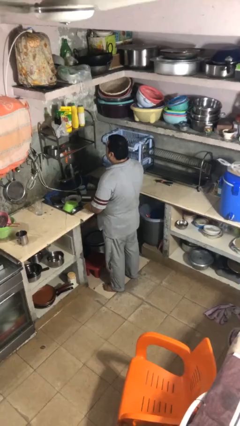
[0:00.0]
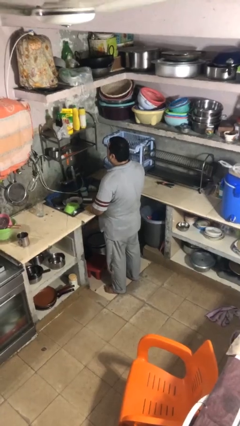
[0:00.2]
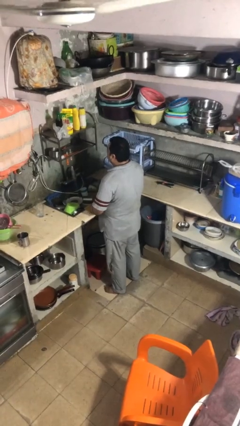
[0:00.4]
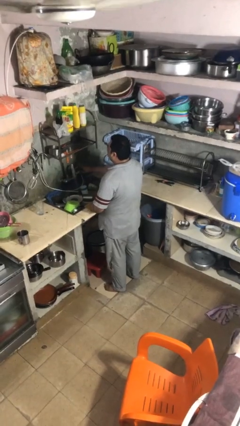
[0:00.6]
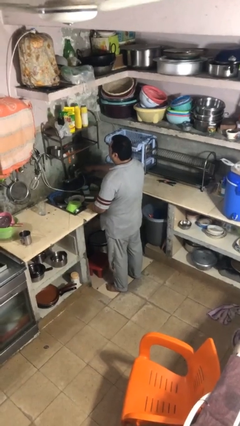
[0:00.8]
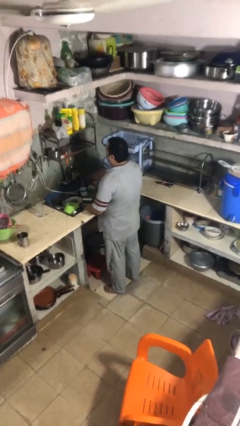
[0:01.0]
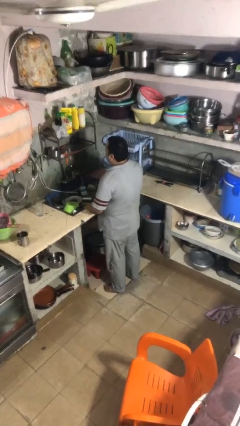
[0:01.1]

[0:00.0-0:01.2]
person turns off faucet

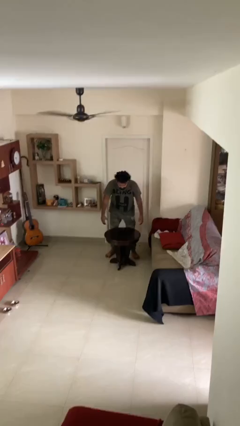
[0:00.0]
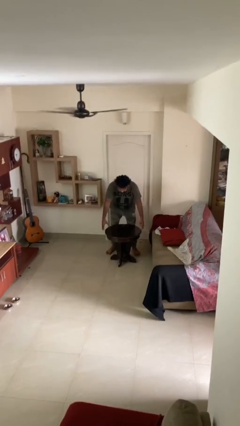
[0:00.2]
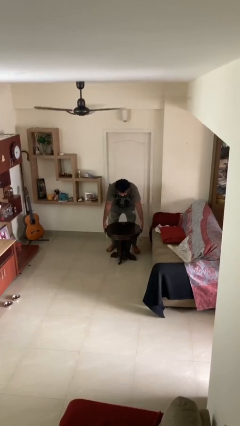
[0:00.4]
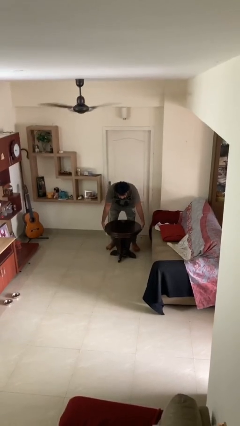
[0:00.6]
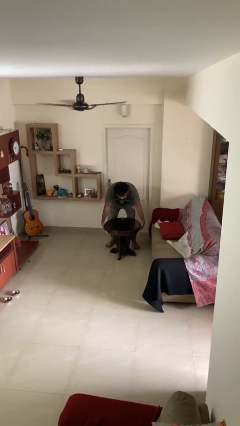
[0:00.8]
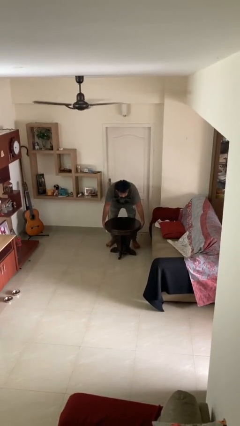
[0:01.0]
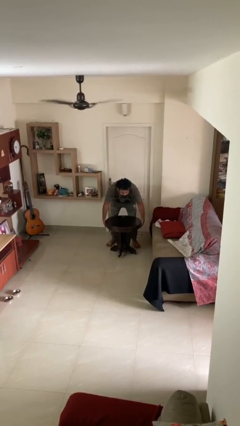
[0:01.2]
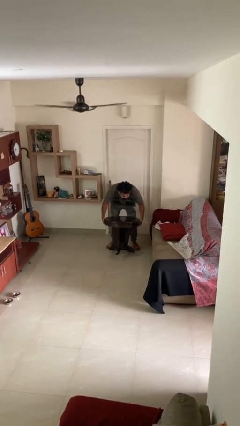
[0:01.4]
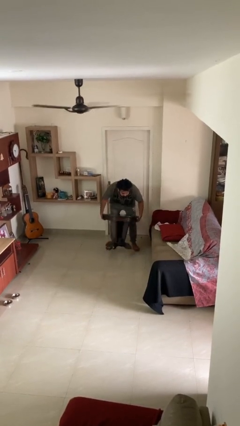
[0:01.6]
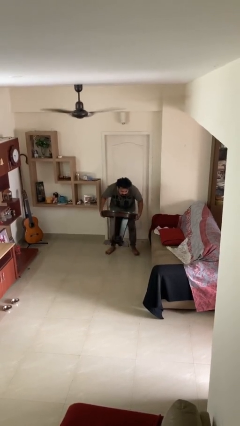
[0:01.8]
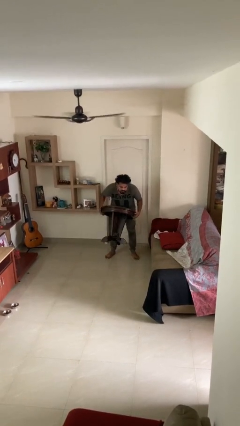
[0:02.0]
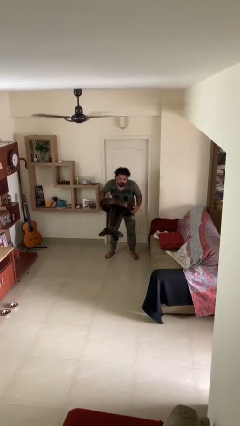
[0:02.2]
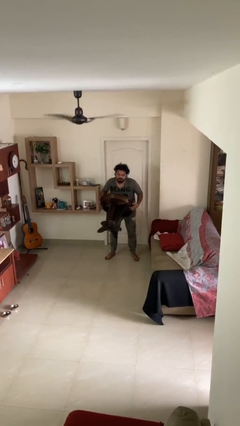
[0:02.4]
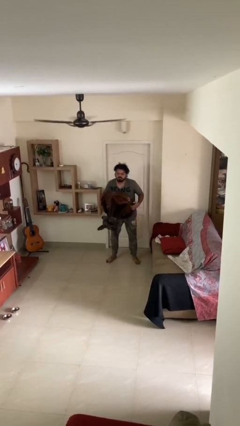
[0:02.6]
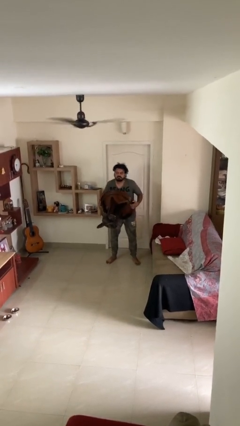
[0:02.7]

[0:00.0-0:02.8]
person picks up object from floor

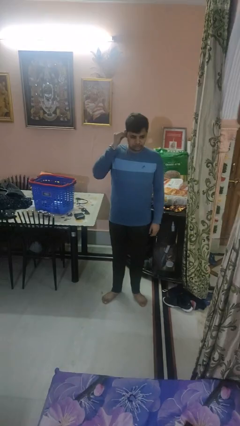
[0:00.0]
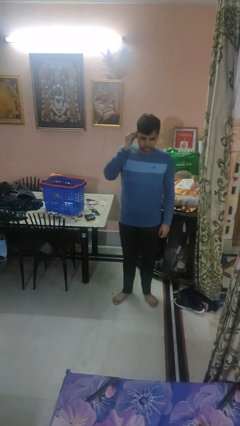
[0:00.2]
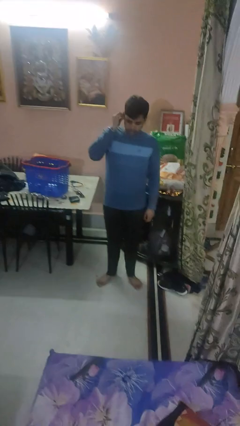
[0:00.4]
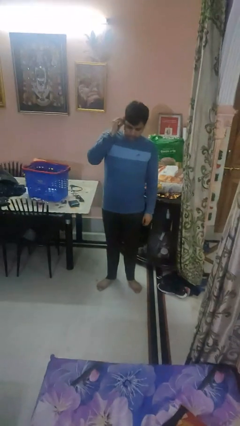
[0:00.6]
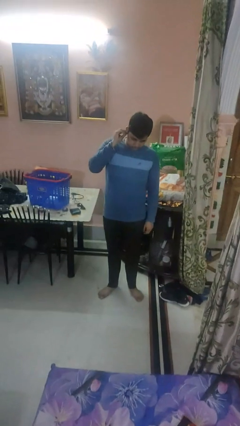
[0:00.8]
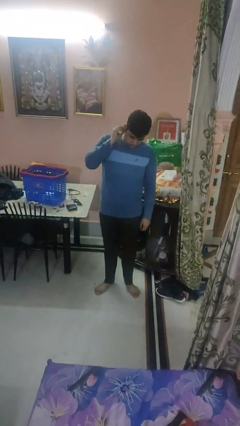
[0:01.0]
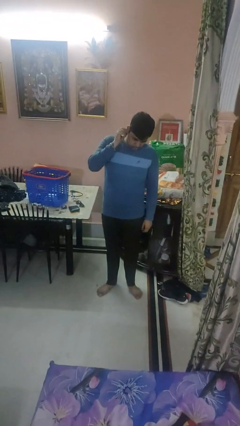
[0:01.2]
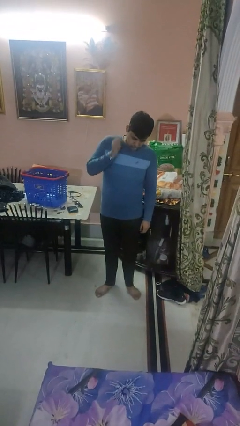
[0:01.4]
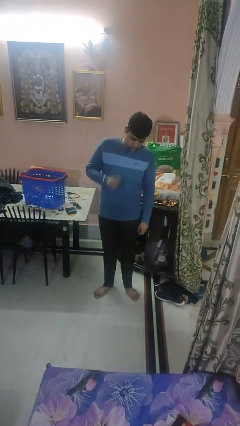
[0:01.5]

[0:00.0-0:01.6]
person puts on earrings

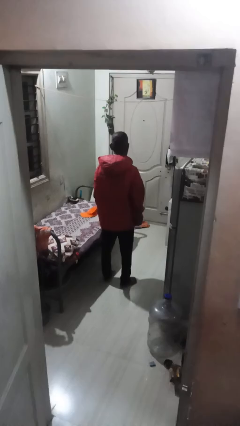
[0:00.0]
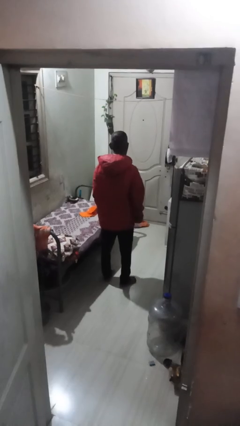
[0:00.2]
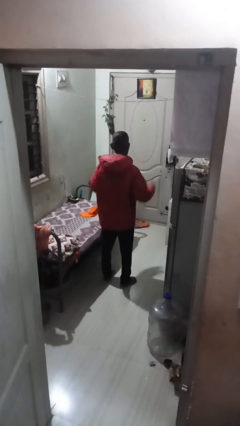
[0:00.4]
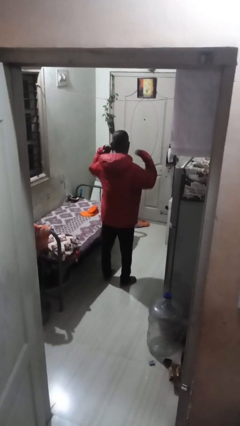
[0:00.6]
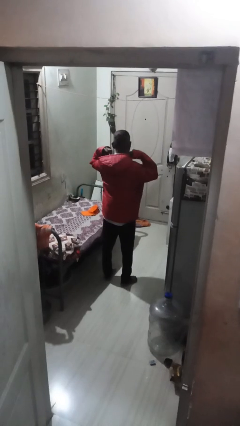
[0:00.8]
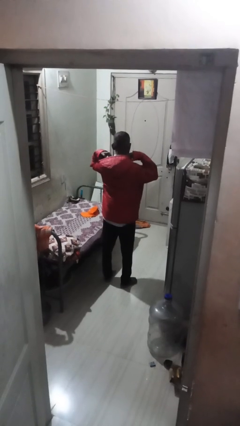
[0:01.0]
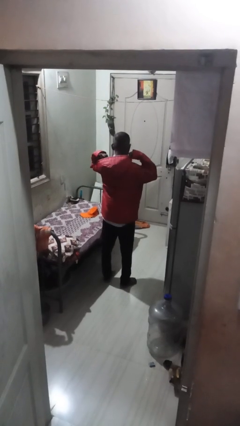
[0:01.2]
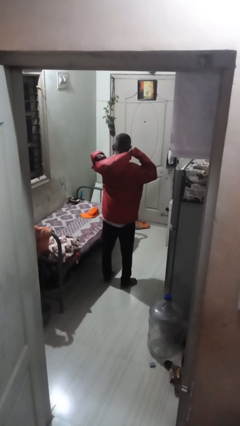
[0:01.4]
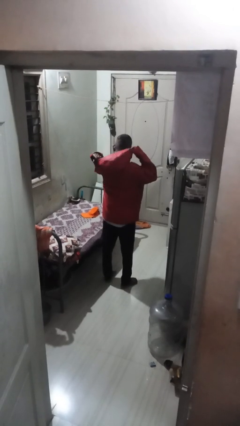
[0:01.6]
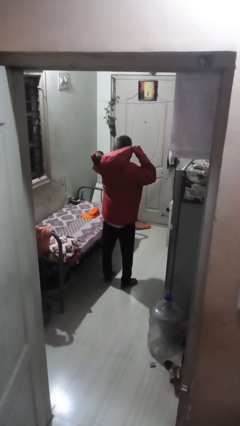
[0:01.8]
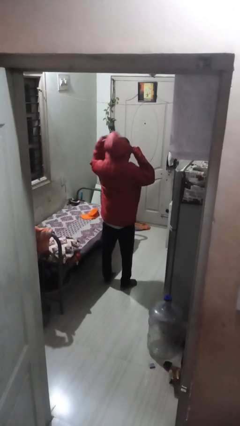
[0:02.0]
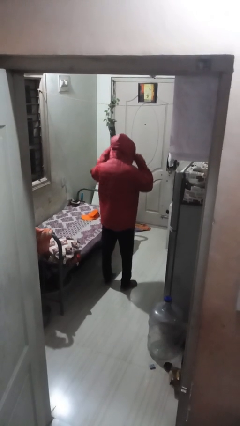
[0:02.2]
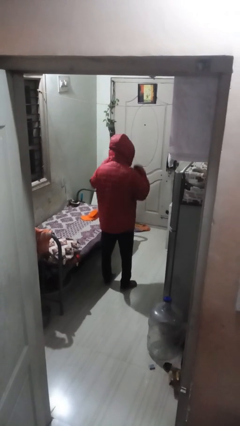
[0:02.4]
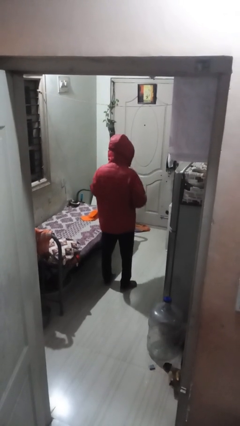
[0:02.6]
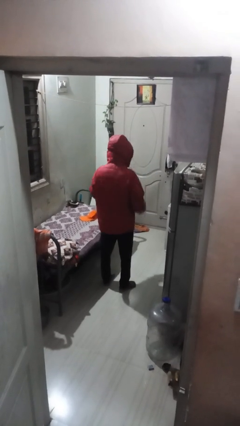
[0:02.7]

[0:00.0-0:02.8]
person puts on hoodie

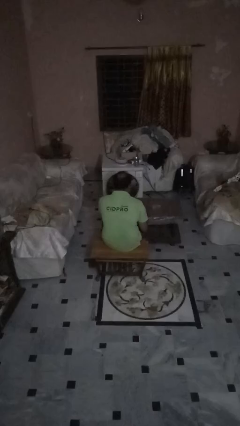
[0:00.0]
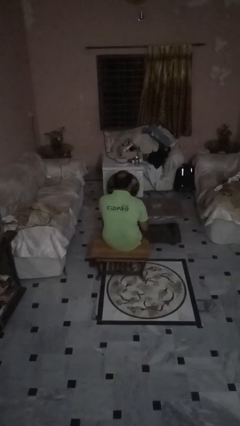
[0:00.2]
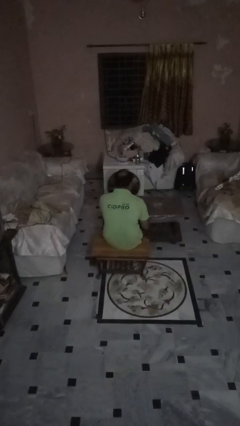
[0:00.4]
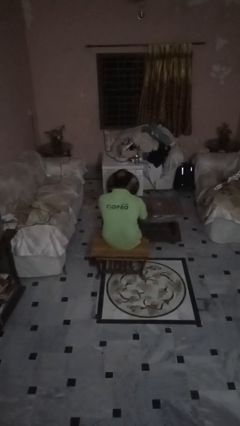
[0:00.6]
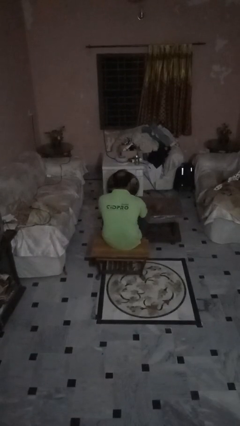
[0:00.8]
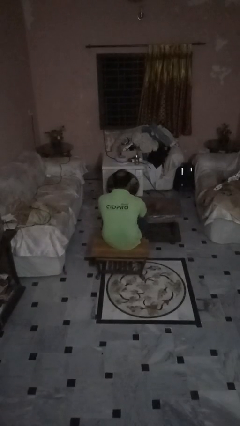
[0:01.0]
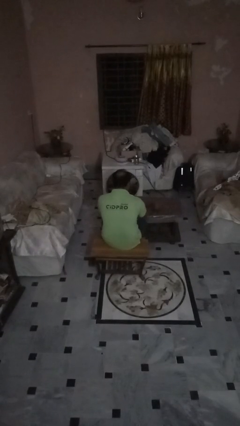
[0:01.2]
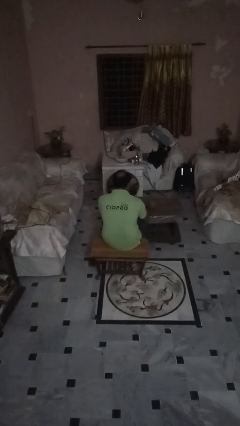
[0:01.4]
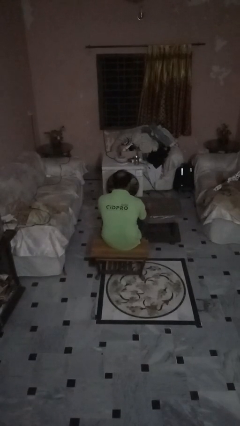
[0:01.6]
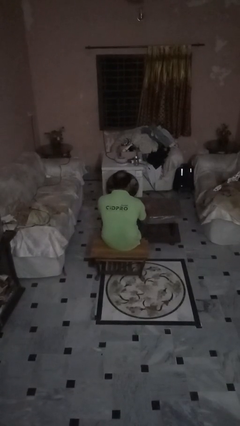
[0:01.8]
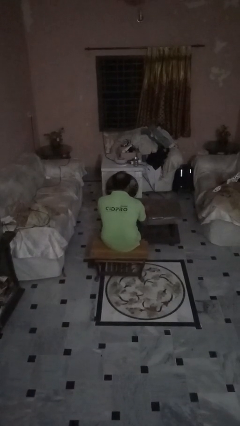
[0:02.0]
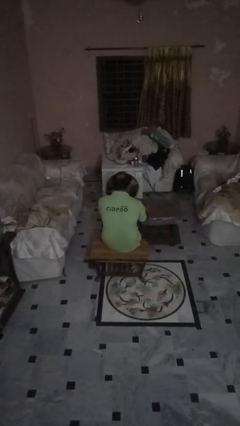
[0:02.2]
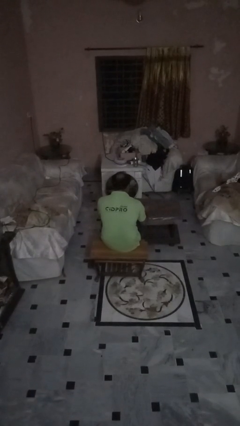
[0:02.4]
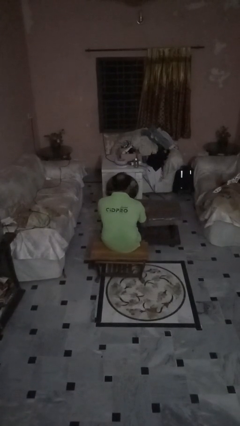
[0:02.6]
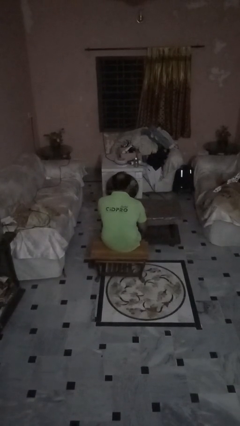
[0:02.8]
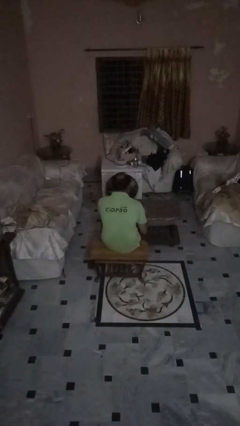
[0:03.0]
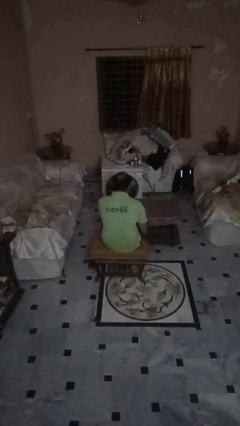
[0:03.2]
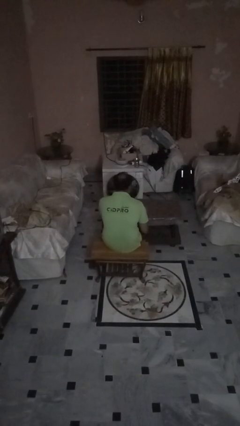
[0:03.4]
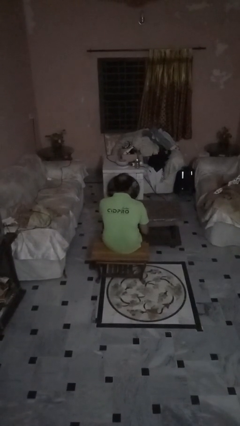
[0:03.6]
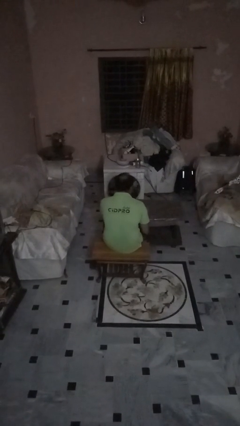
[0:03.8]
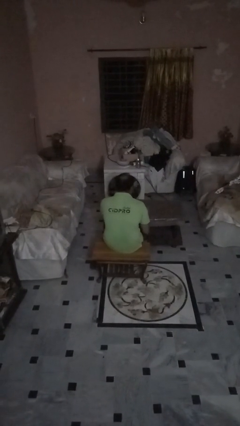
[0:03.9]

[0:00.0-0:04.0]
person sets upright glass

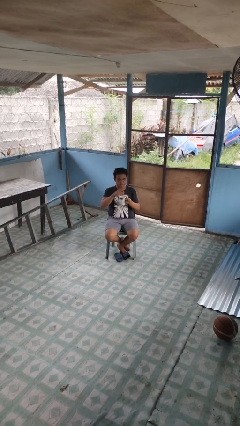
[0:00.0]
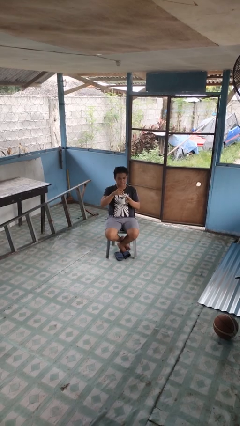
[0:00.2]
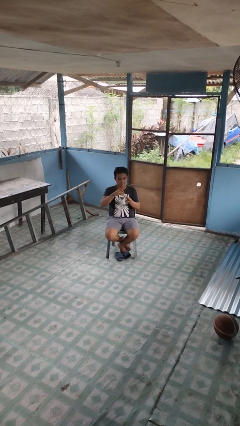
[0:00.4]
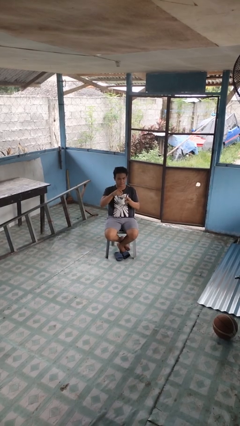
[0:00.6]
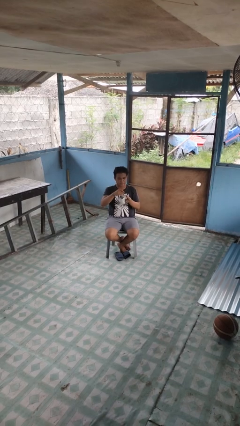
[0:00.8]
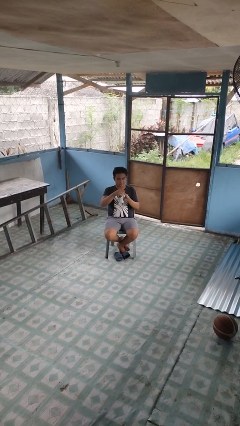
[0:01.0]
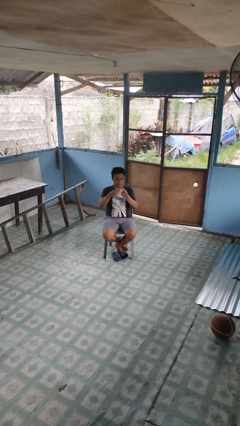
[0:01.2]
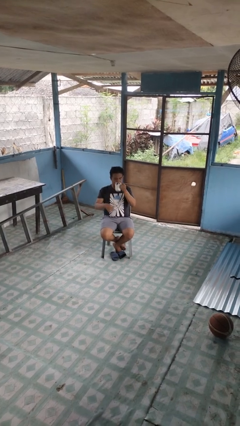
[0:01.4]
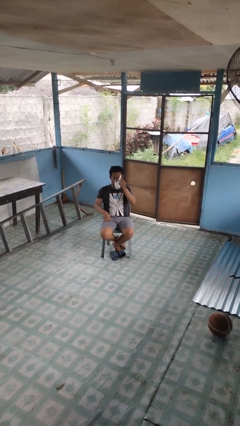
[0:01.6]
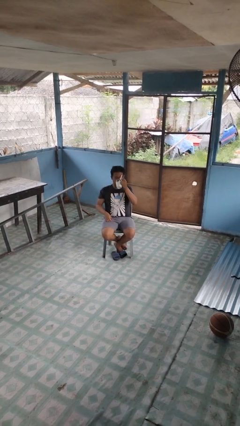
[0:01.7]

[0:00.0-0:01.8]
person stirs mug

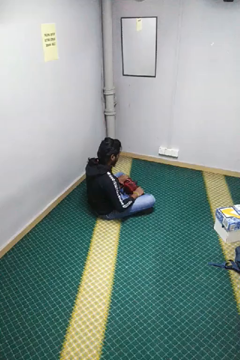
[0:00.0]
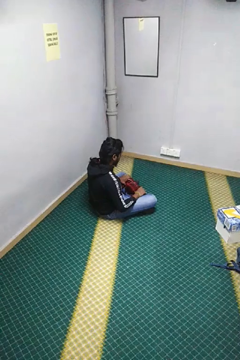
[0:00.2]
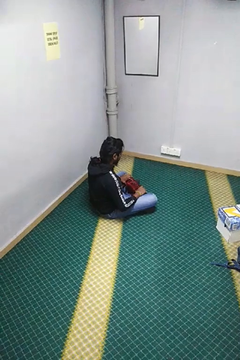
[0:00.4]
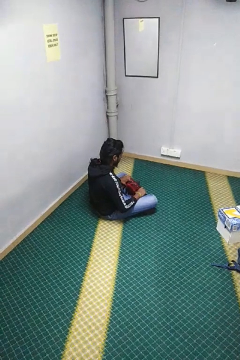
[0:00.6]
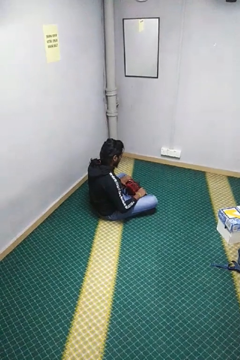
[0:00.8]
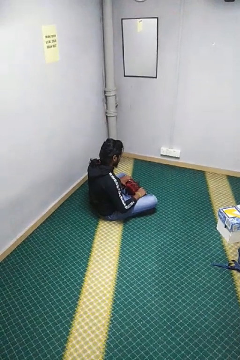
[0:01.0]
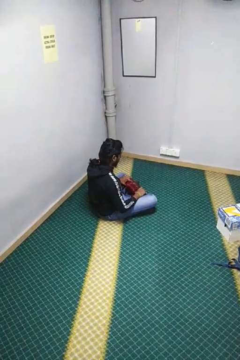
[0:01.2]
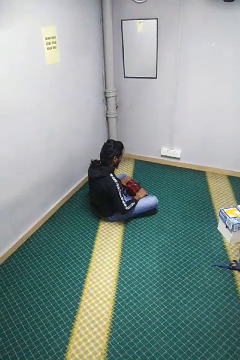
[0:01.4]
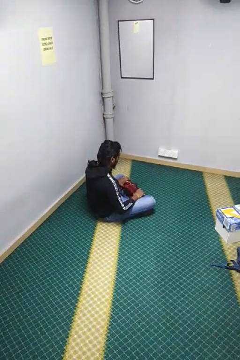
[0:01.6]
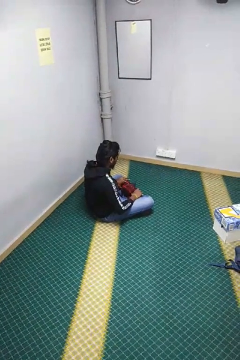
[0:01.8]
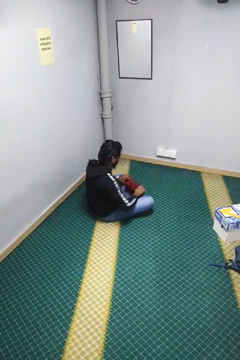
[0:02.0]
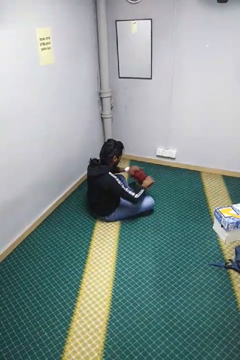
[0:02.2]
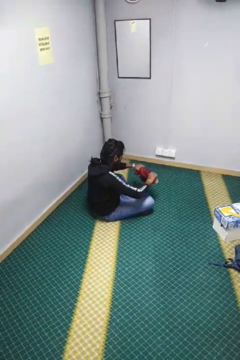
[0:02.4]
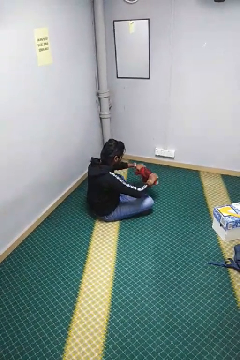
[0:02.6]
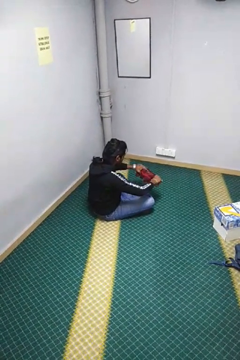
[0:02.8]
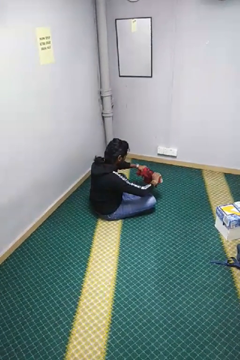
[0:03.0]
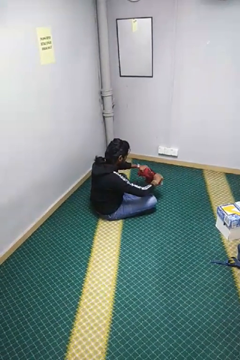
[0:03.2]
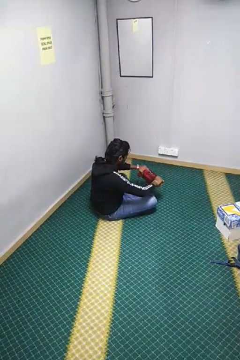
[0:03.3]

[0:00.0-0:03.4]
person squeezes object
